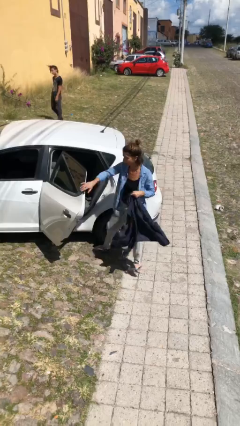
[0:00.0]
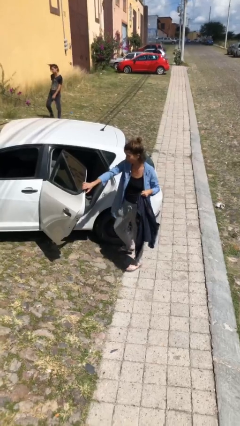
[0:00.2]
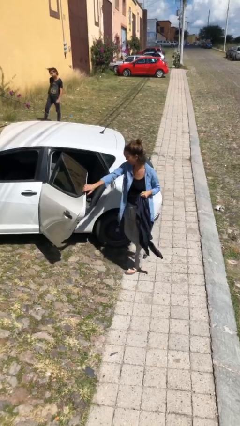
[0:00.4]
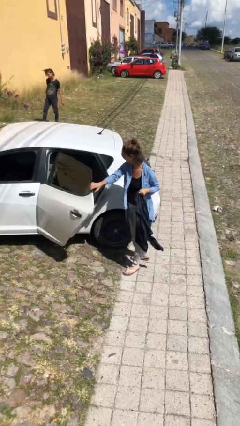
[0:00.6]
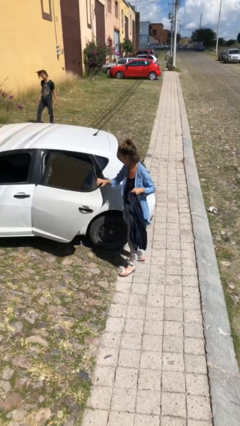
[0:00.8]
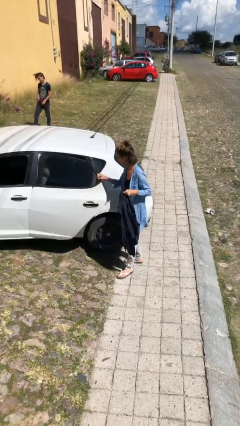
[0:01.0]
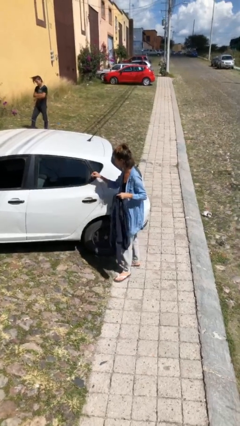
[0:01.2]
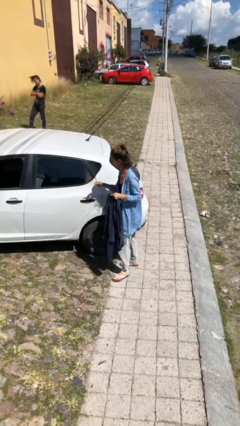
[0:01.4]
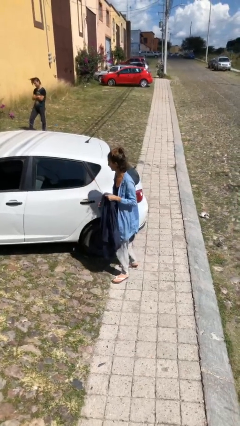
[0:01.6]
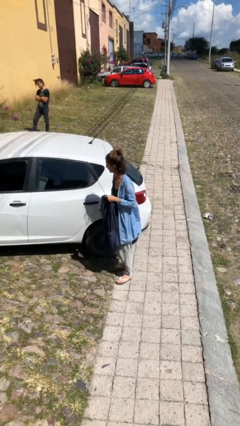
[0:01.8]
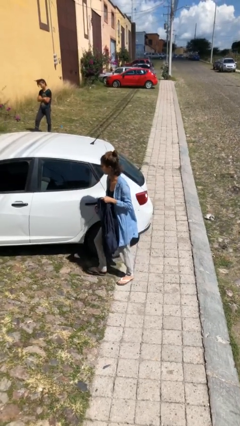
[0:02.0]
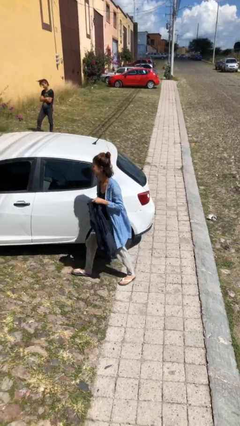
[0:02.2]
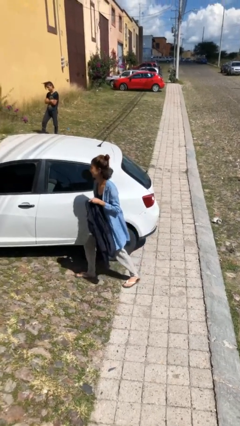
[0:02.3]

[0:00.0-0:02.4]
person closes car door

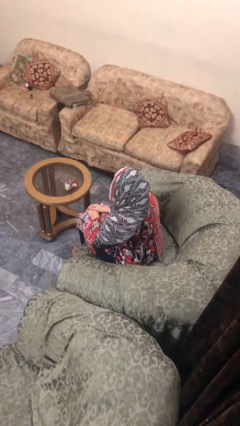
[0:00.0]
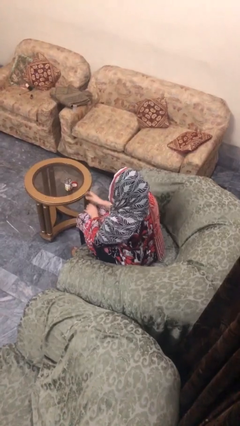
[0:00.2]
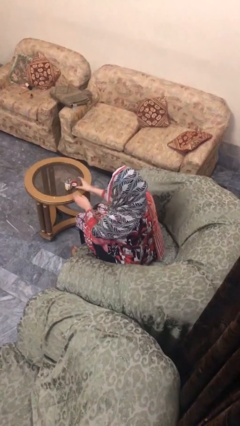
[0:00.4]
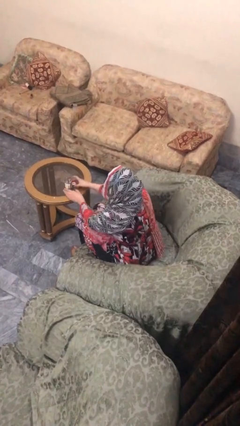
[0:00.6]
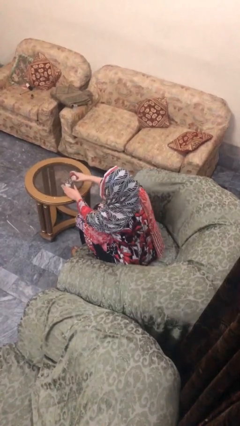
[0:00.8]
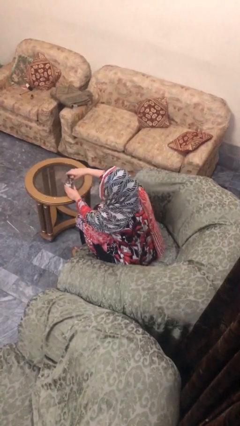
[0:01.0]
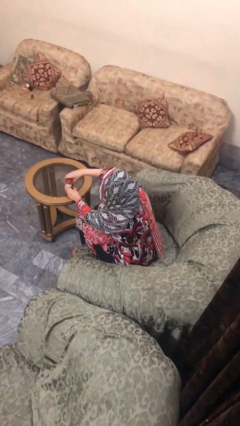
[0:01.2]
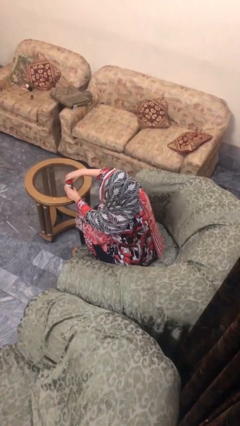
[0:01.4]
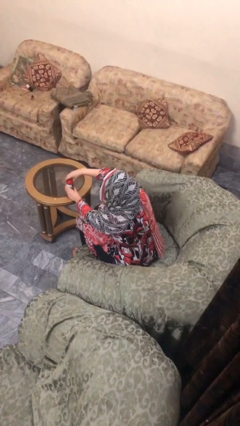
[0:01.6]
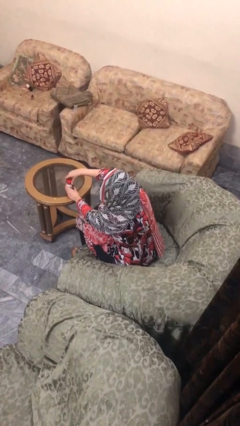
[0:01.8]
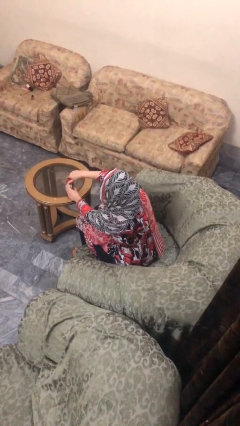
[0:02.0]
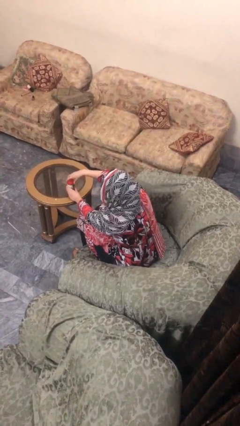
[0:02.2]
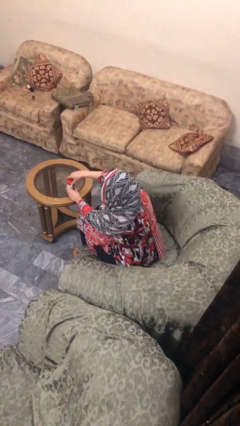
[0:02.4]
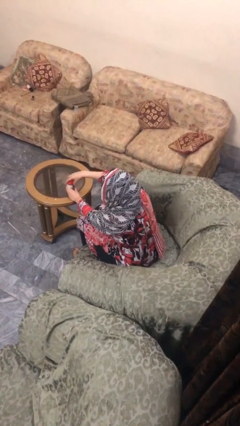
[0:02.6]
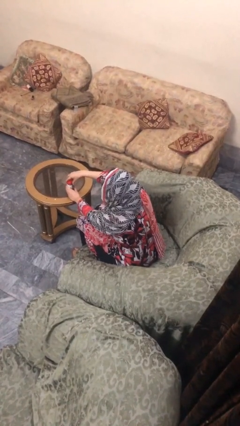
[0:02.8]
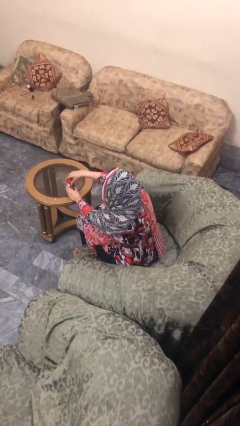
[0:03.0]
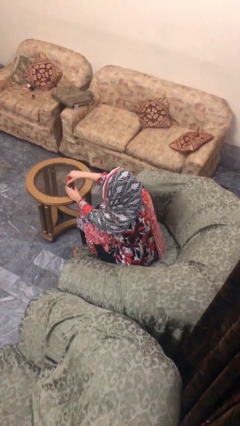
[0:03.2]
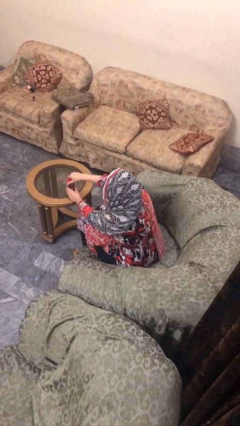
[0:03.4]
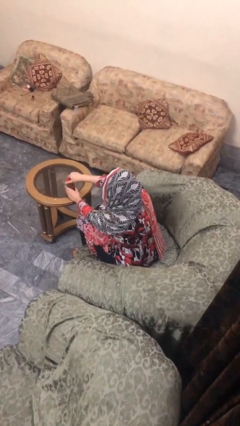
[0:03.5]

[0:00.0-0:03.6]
person closes jar

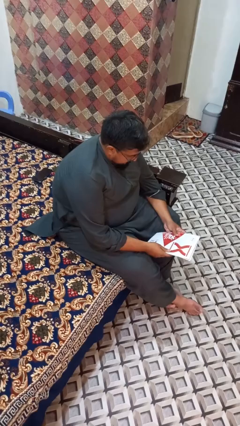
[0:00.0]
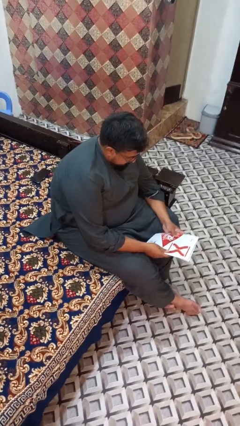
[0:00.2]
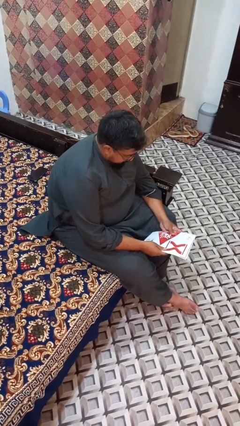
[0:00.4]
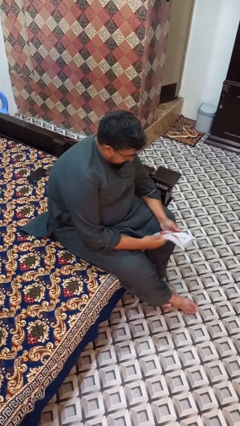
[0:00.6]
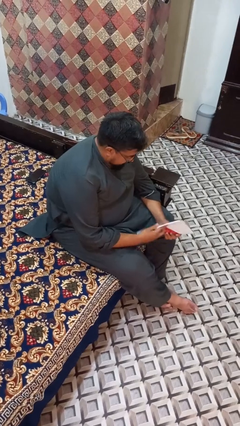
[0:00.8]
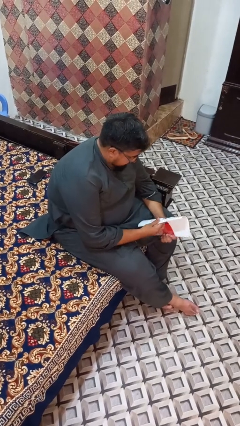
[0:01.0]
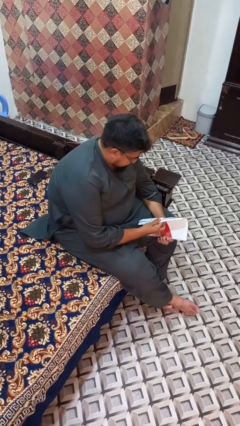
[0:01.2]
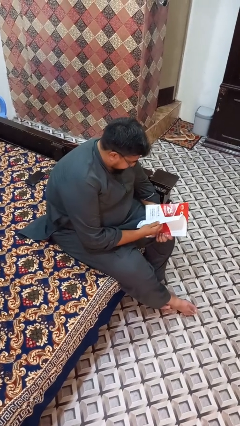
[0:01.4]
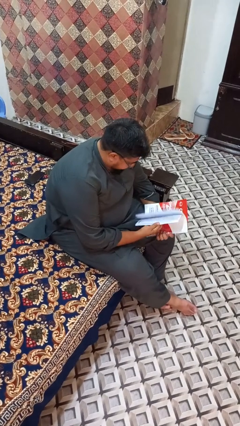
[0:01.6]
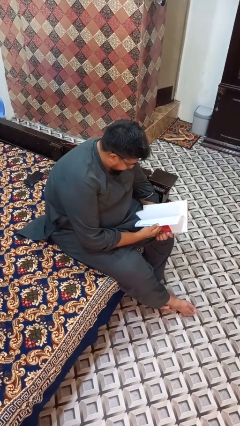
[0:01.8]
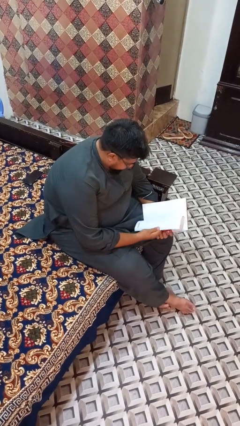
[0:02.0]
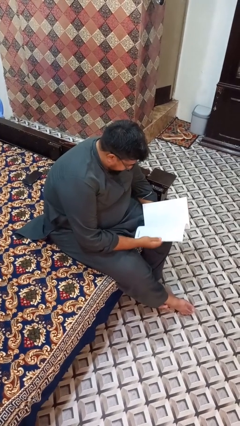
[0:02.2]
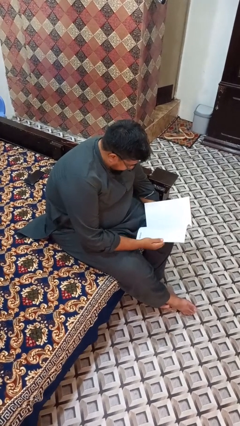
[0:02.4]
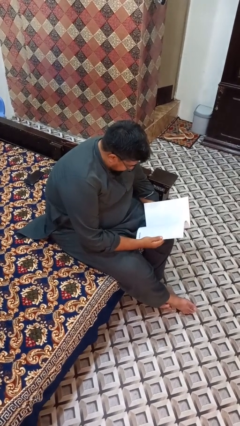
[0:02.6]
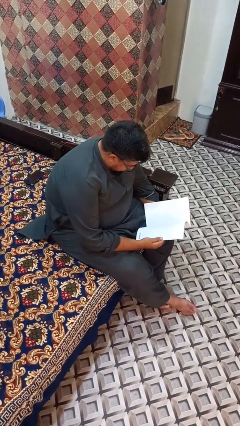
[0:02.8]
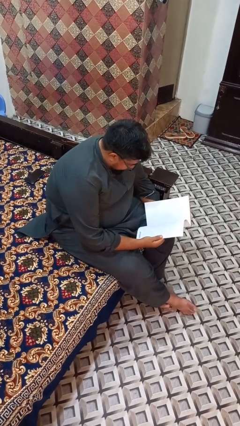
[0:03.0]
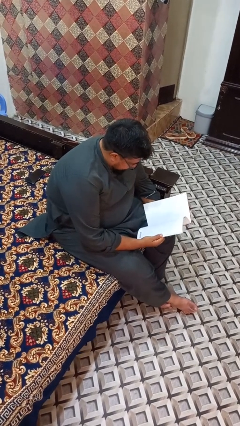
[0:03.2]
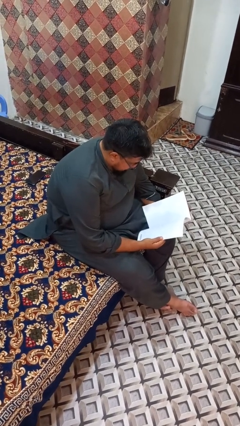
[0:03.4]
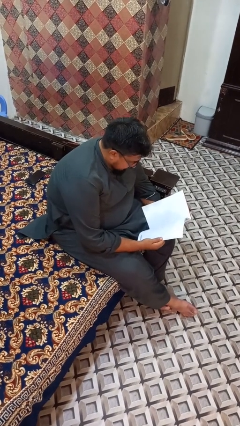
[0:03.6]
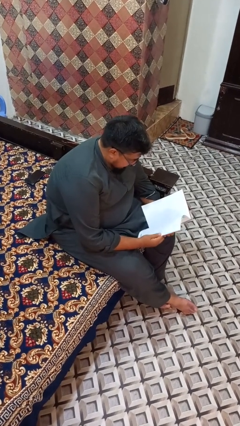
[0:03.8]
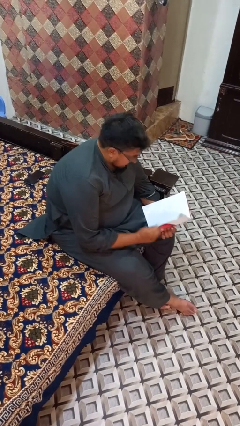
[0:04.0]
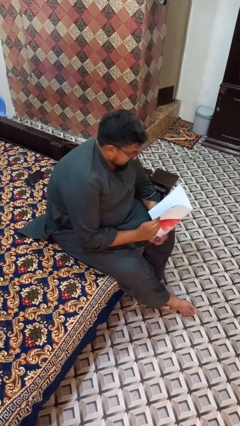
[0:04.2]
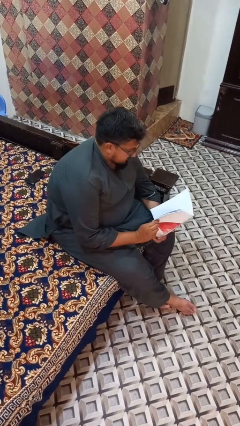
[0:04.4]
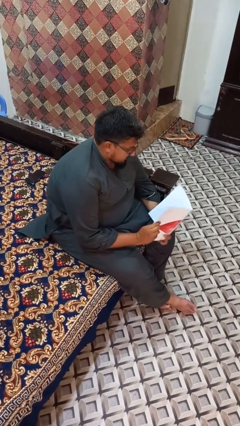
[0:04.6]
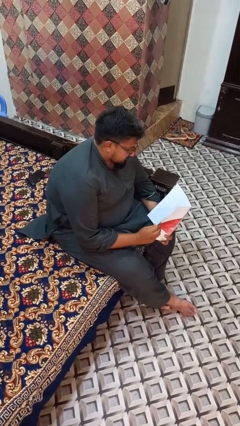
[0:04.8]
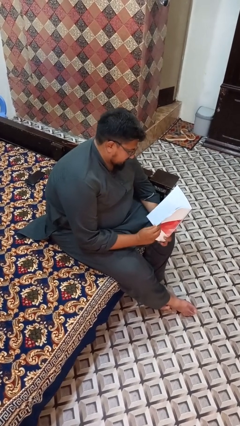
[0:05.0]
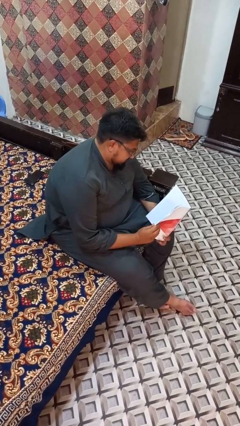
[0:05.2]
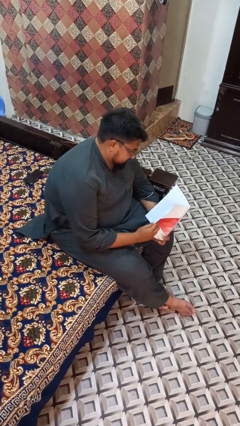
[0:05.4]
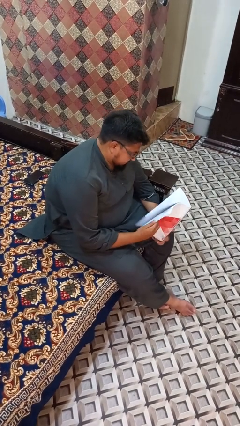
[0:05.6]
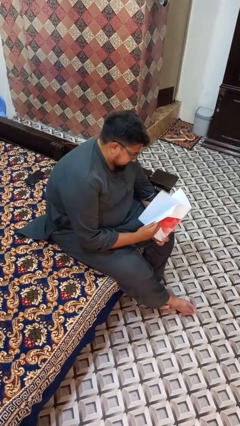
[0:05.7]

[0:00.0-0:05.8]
person reads magazine

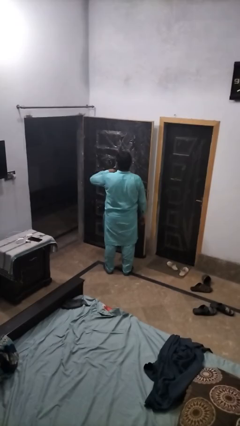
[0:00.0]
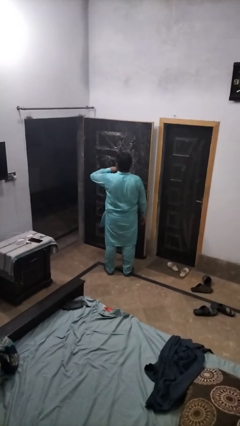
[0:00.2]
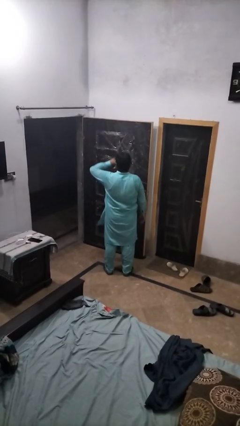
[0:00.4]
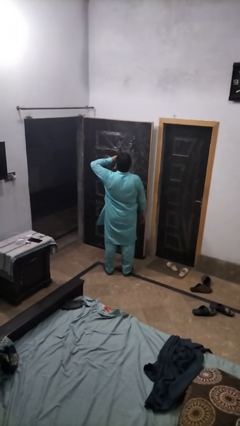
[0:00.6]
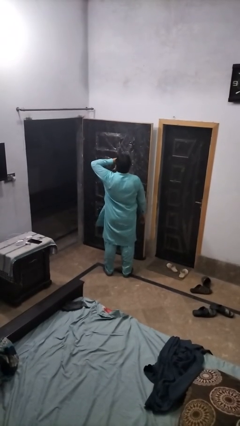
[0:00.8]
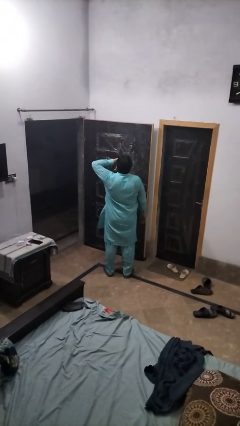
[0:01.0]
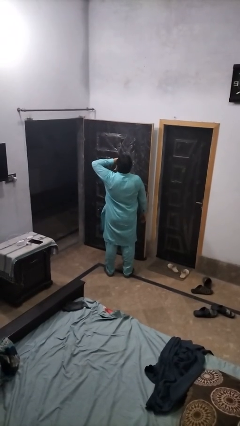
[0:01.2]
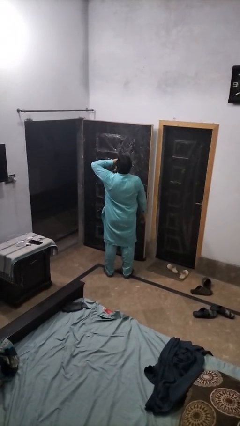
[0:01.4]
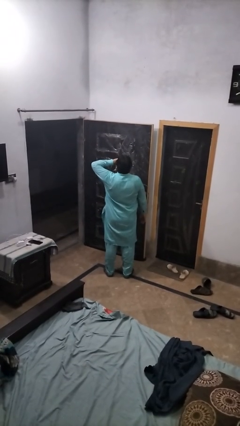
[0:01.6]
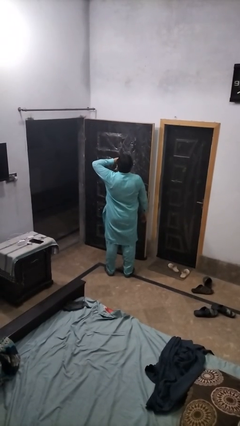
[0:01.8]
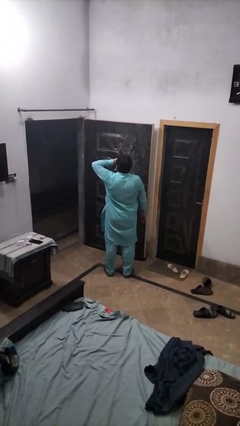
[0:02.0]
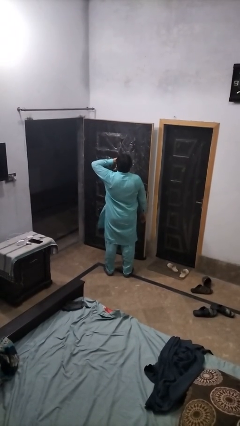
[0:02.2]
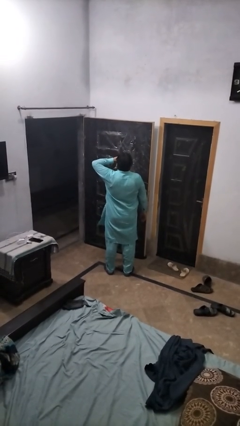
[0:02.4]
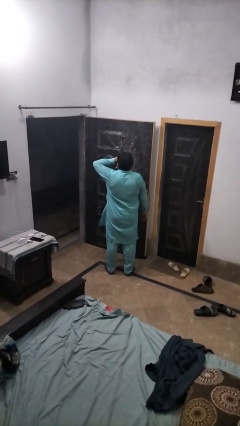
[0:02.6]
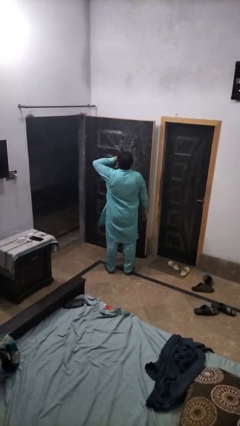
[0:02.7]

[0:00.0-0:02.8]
person yawns

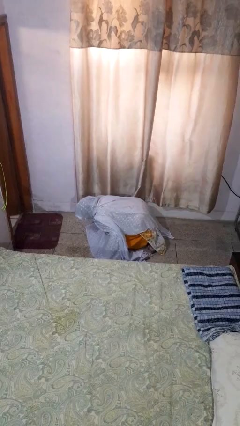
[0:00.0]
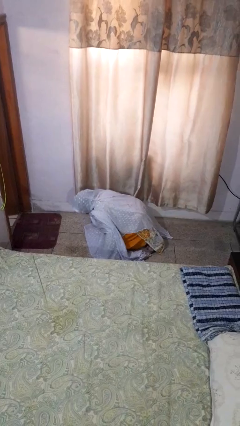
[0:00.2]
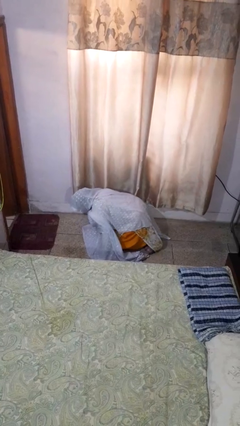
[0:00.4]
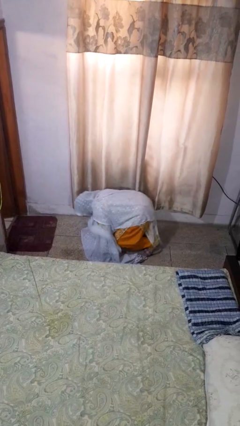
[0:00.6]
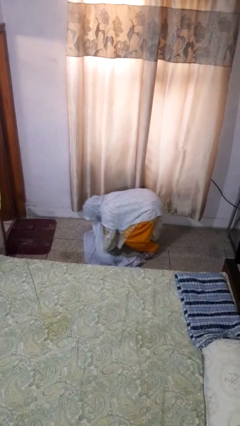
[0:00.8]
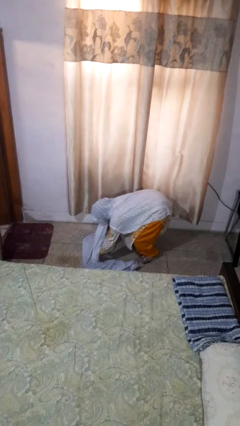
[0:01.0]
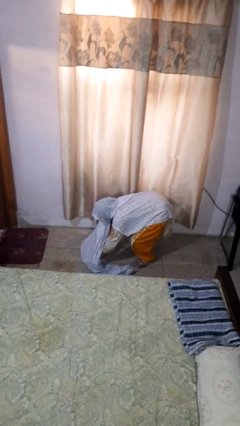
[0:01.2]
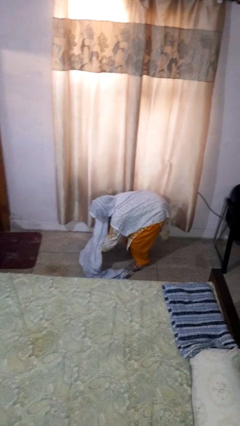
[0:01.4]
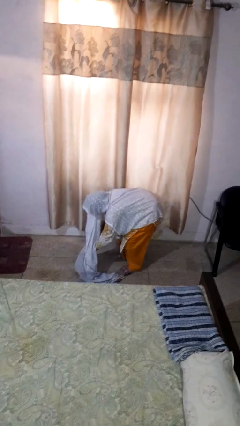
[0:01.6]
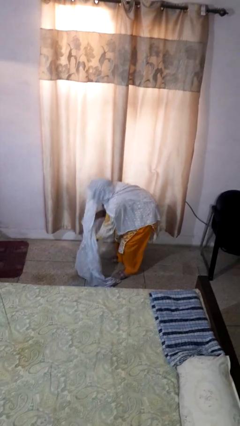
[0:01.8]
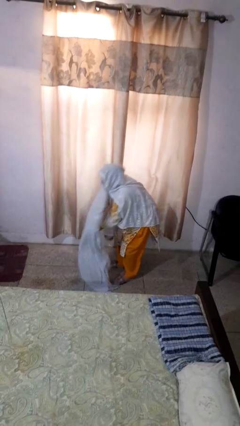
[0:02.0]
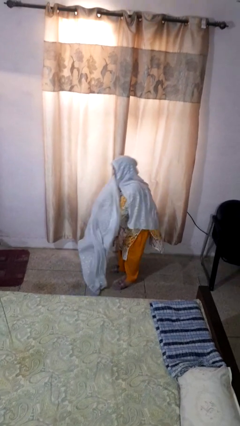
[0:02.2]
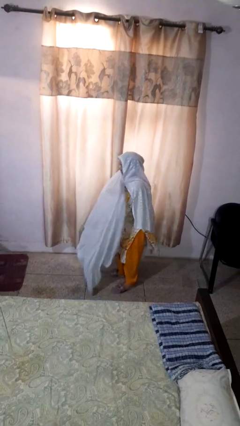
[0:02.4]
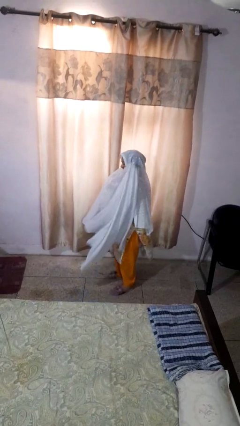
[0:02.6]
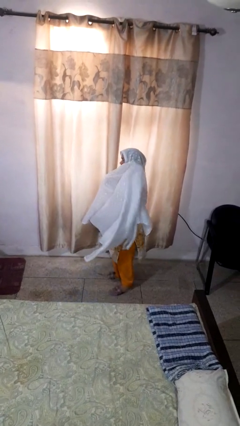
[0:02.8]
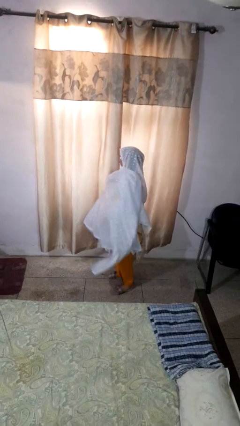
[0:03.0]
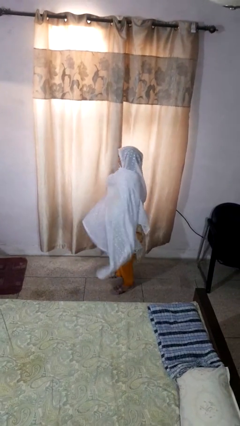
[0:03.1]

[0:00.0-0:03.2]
person stands up from floor
